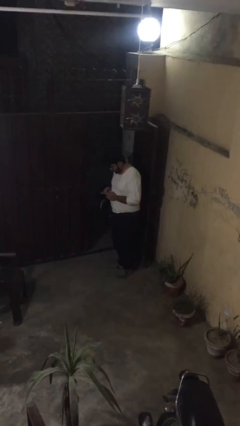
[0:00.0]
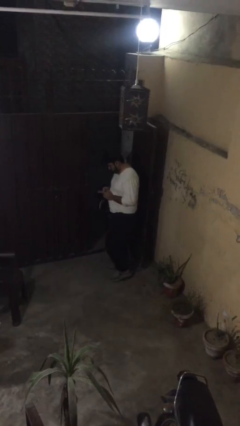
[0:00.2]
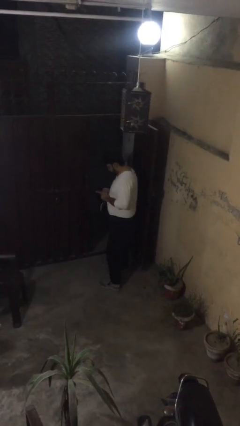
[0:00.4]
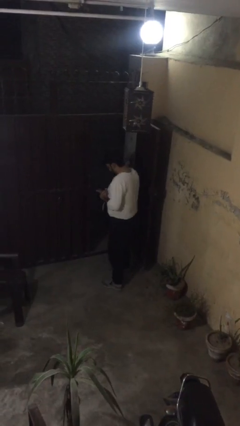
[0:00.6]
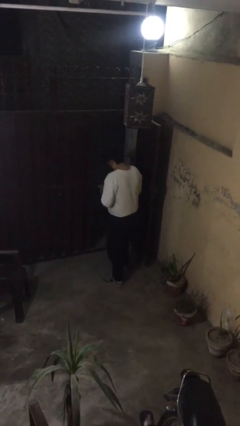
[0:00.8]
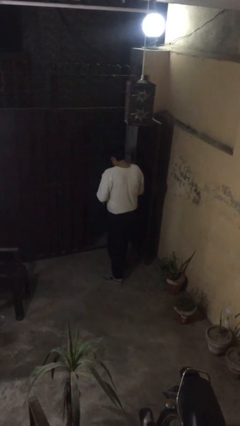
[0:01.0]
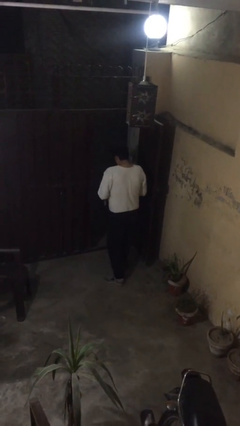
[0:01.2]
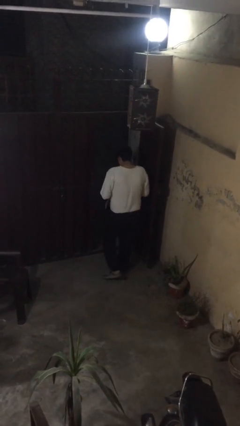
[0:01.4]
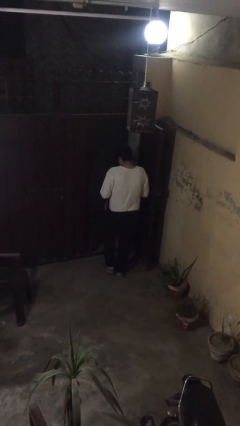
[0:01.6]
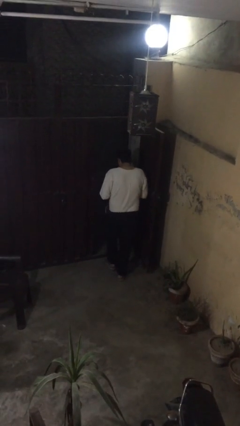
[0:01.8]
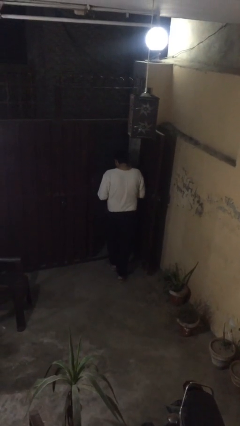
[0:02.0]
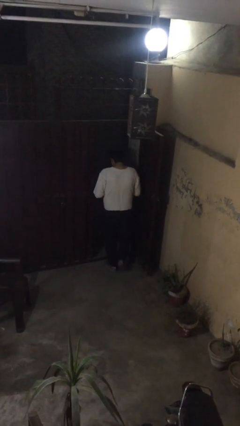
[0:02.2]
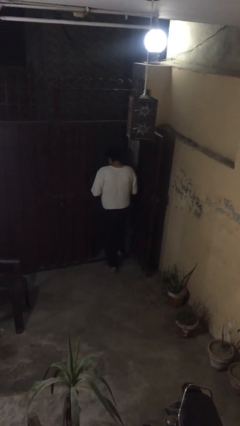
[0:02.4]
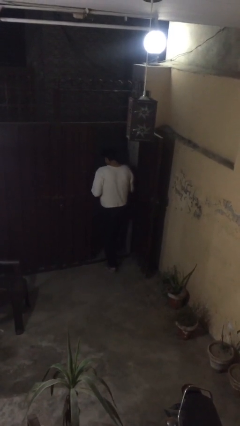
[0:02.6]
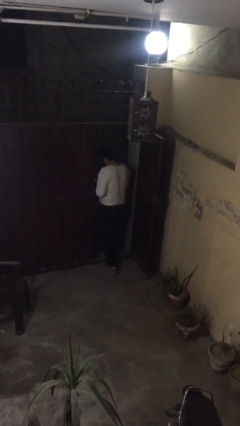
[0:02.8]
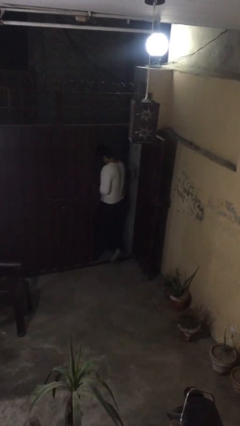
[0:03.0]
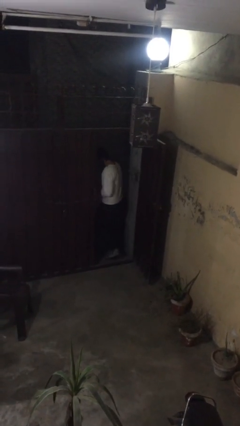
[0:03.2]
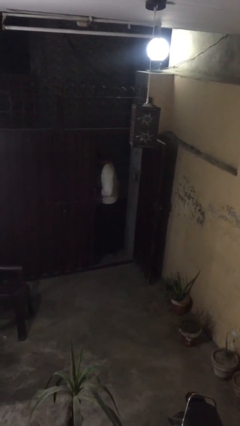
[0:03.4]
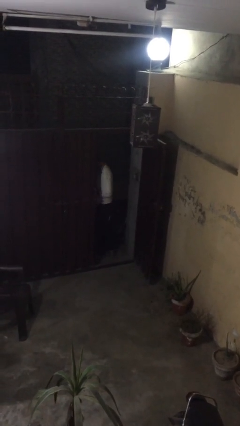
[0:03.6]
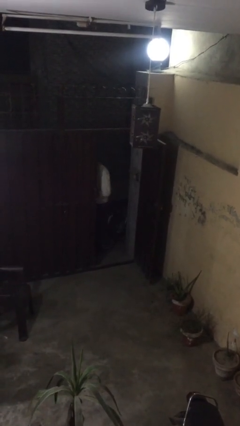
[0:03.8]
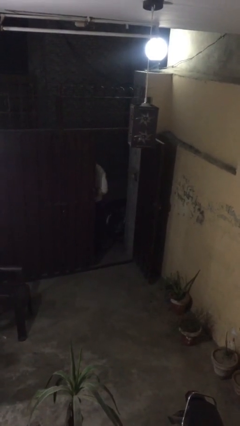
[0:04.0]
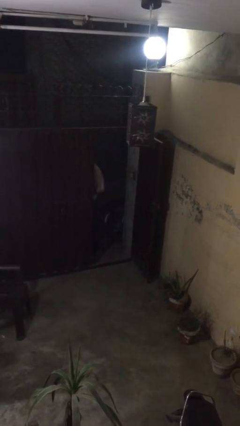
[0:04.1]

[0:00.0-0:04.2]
person exits scene through structure

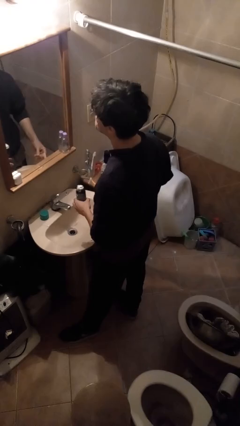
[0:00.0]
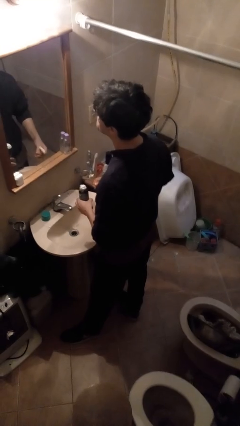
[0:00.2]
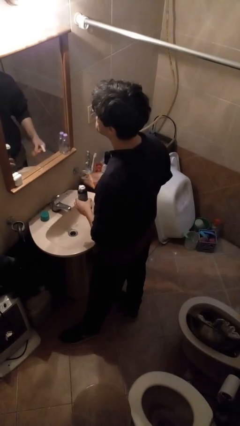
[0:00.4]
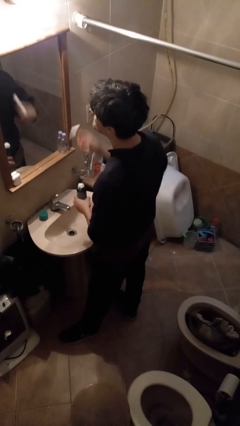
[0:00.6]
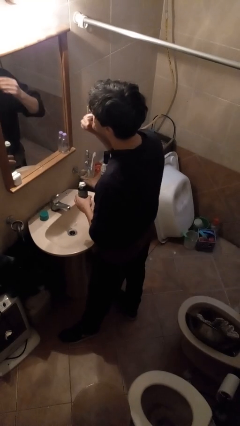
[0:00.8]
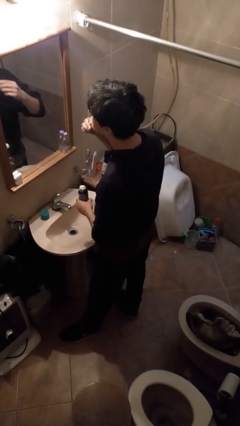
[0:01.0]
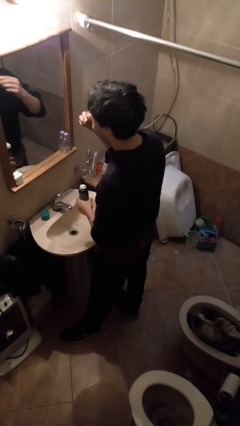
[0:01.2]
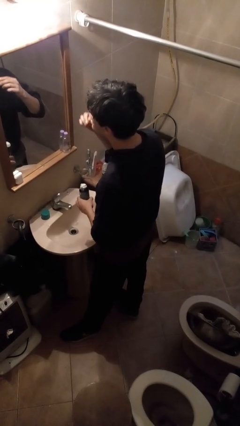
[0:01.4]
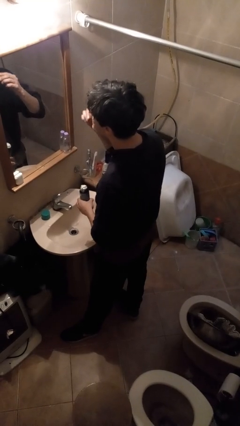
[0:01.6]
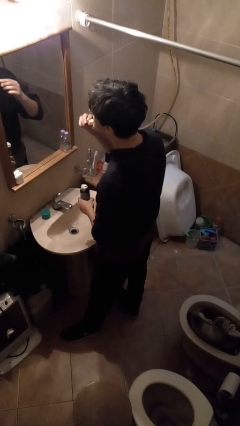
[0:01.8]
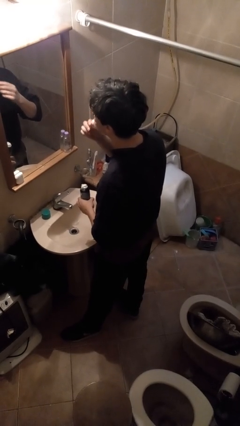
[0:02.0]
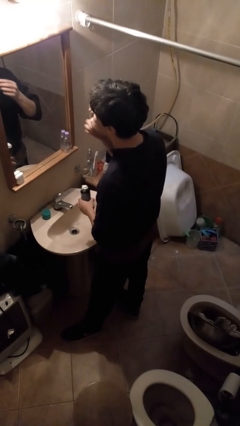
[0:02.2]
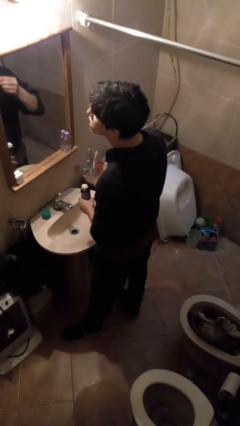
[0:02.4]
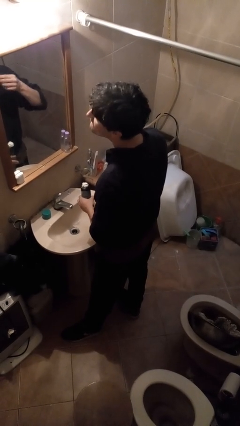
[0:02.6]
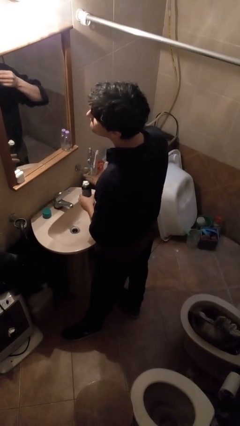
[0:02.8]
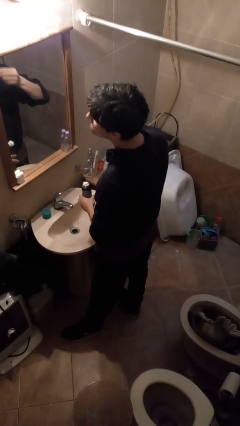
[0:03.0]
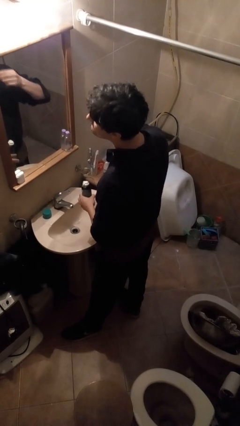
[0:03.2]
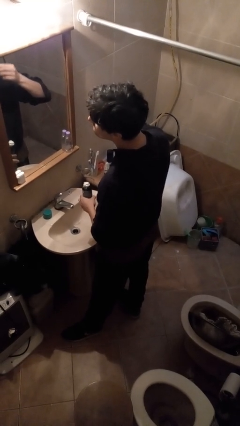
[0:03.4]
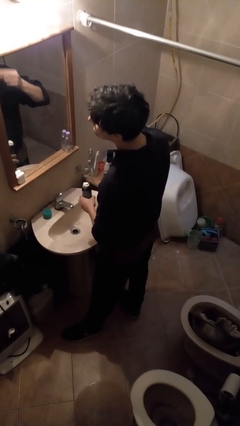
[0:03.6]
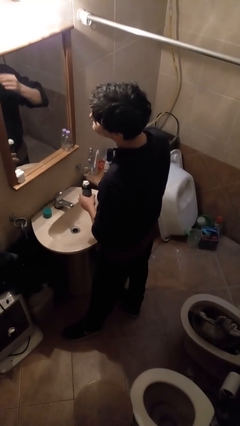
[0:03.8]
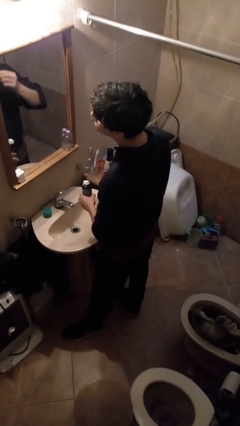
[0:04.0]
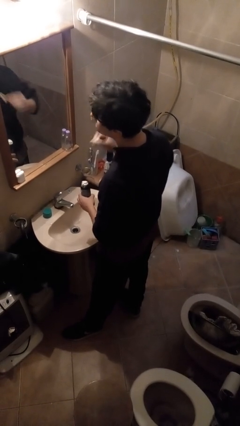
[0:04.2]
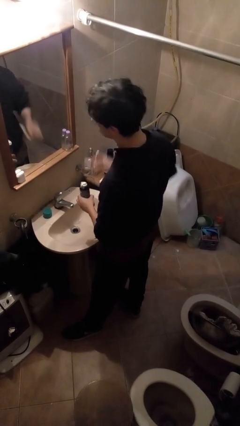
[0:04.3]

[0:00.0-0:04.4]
person shaves face

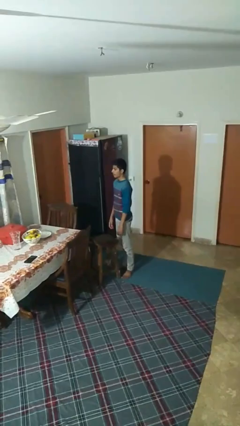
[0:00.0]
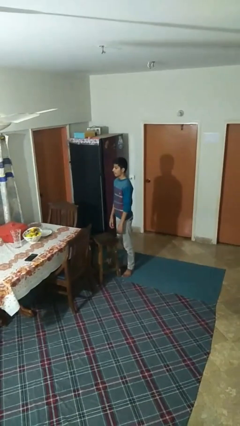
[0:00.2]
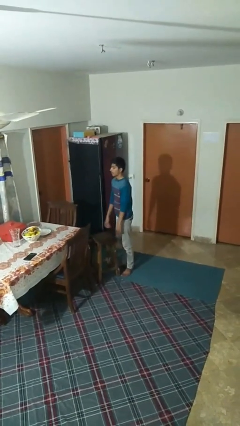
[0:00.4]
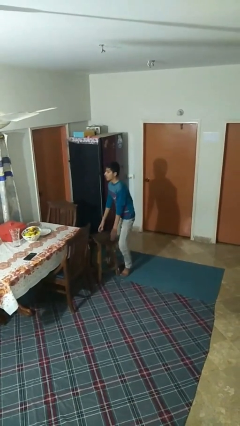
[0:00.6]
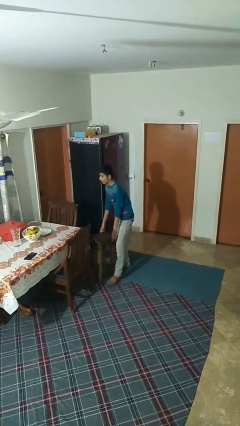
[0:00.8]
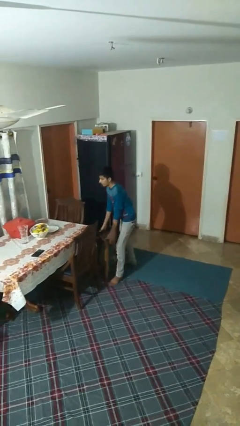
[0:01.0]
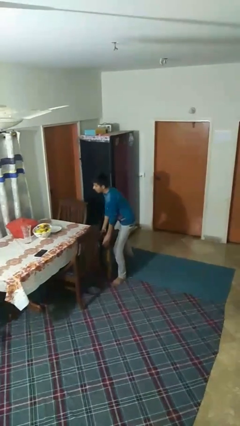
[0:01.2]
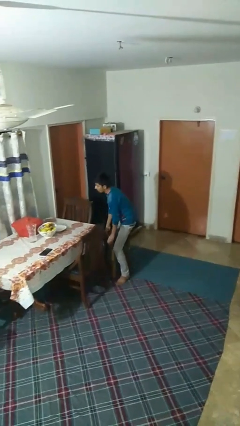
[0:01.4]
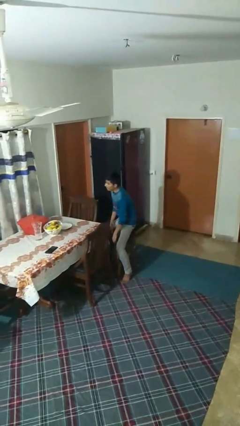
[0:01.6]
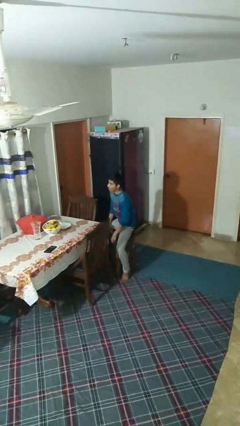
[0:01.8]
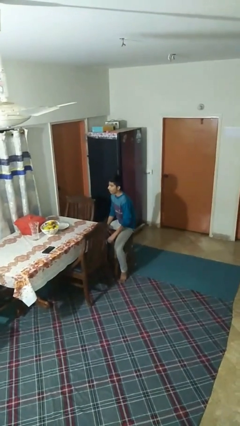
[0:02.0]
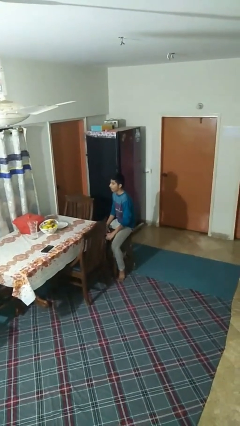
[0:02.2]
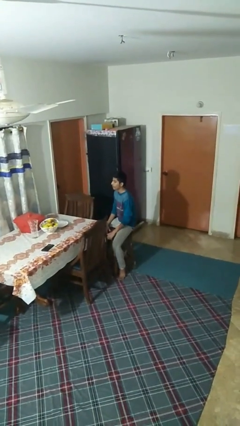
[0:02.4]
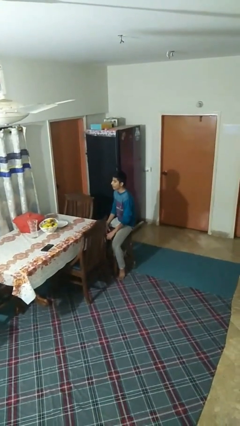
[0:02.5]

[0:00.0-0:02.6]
person sits down

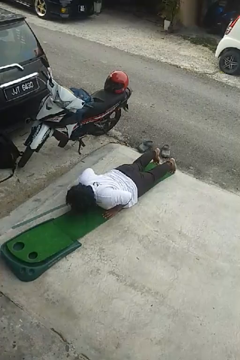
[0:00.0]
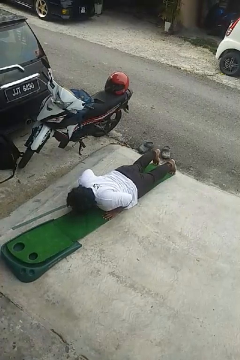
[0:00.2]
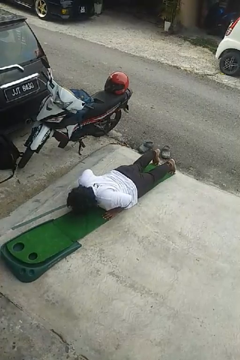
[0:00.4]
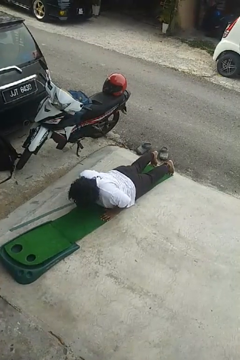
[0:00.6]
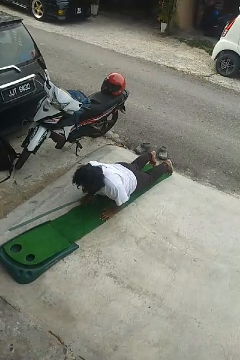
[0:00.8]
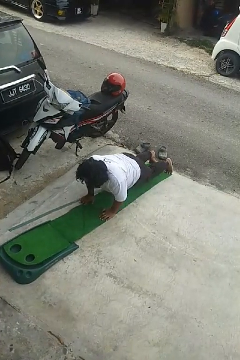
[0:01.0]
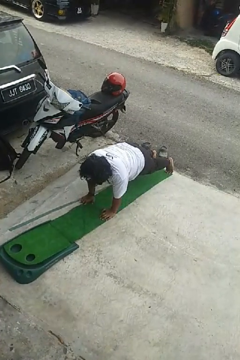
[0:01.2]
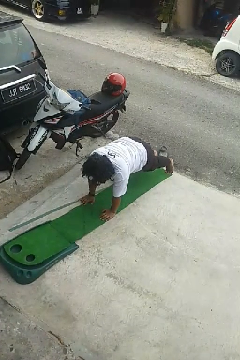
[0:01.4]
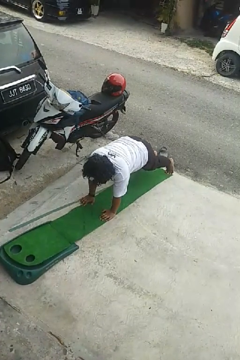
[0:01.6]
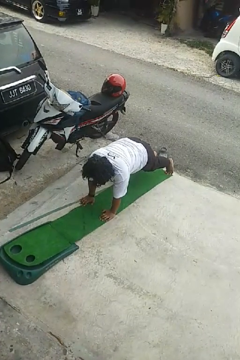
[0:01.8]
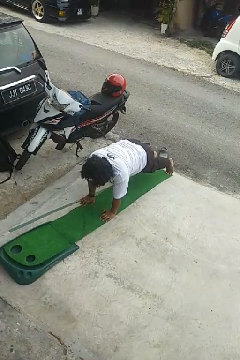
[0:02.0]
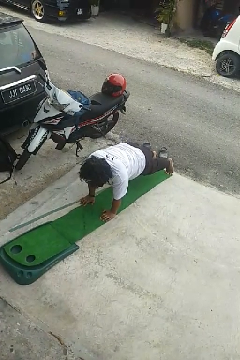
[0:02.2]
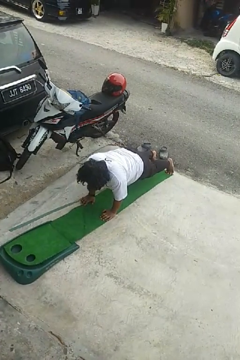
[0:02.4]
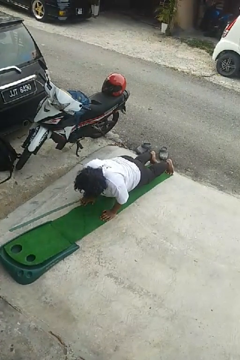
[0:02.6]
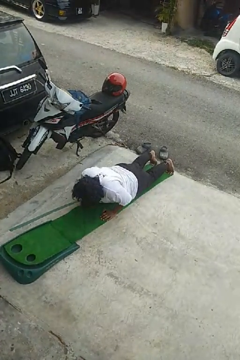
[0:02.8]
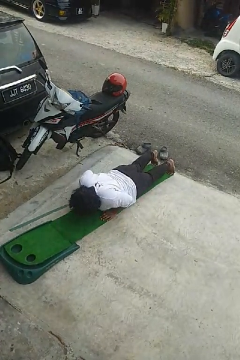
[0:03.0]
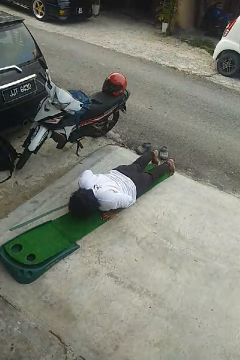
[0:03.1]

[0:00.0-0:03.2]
person exercises with pushup

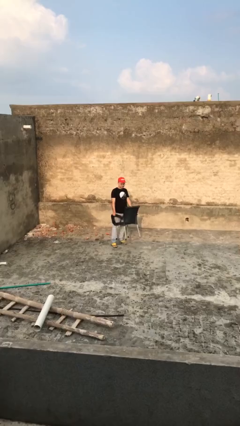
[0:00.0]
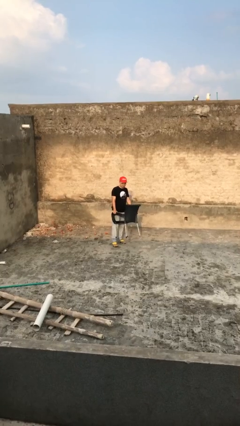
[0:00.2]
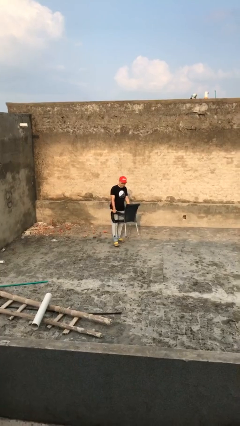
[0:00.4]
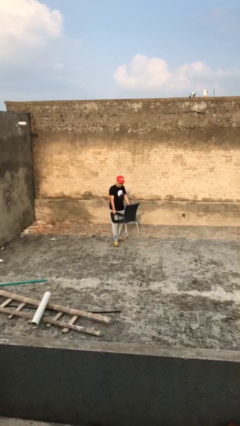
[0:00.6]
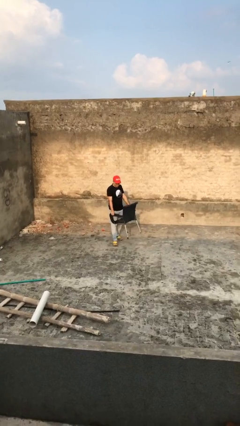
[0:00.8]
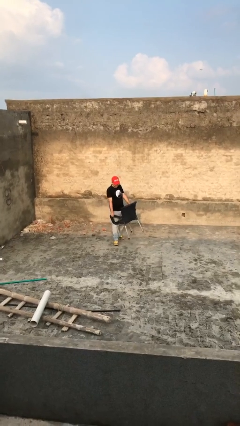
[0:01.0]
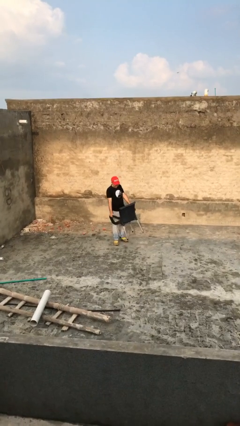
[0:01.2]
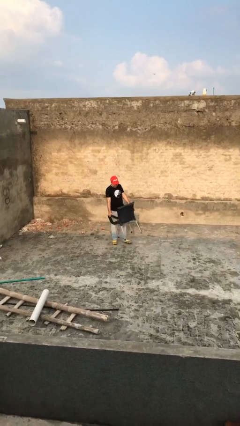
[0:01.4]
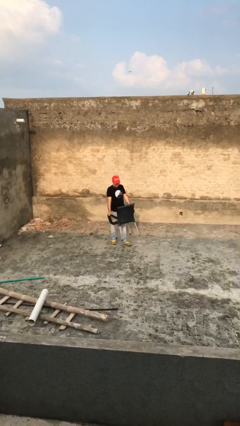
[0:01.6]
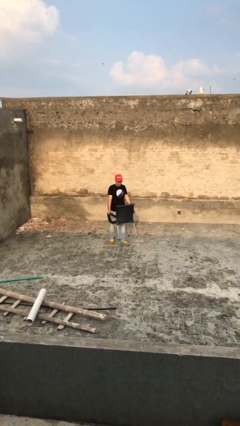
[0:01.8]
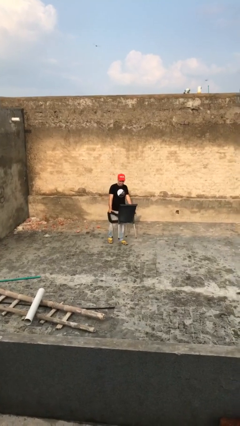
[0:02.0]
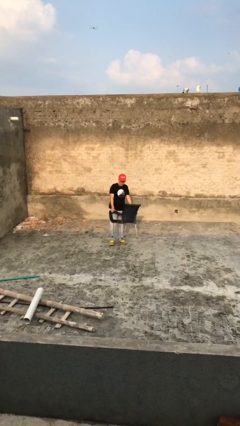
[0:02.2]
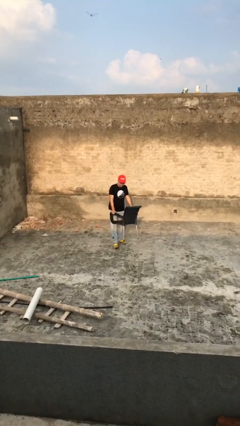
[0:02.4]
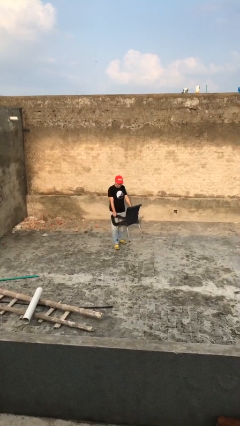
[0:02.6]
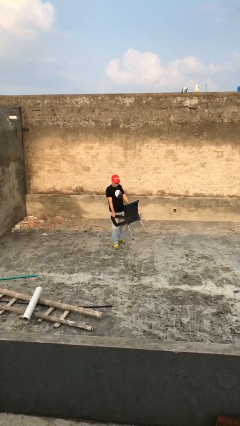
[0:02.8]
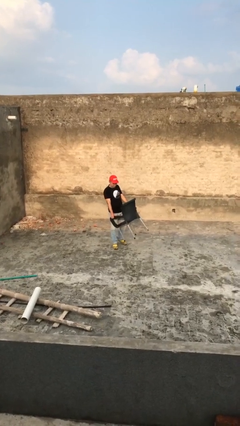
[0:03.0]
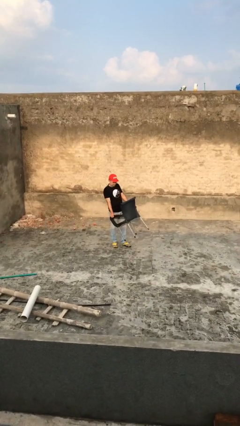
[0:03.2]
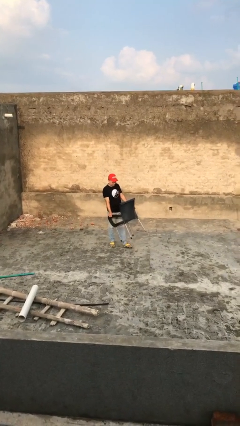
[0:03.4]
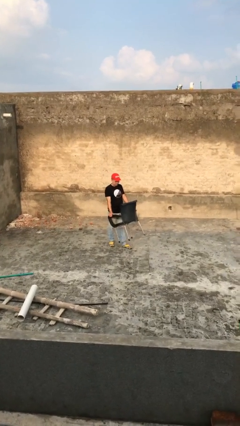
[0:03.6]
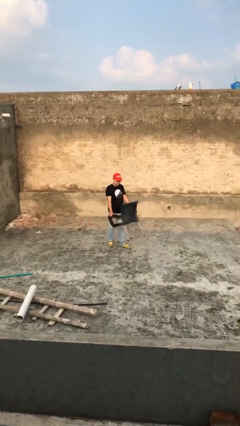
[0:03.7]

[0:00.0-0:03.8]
person carries heavy object
